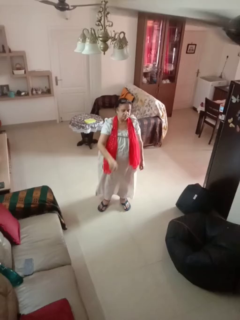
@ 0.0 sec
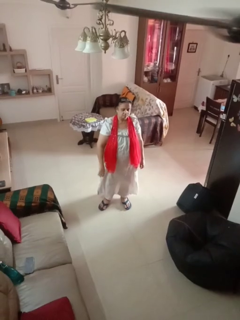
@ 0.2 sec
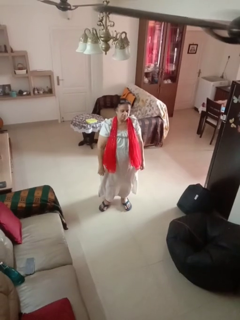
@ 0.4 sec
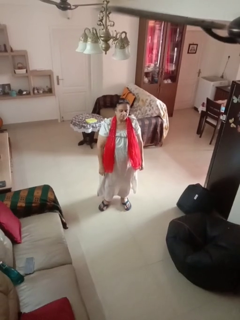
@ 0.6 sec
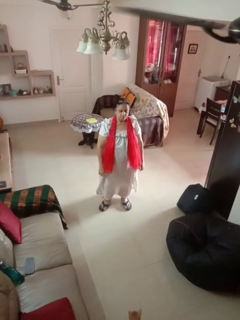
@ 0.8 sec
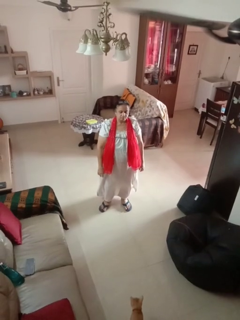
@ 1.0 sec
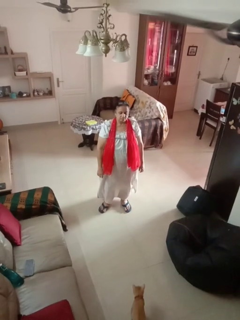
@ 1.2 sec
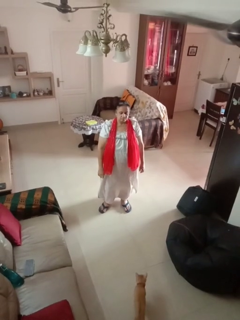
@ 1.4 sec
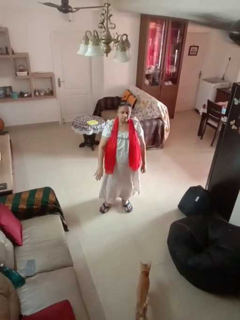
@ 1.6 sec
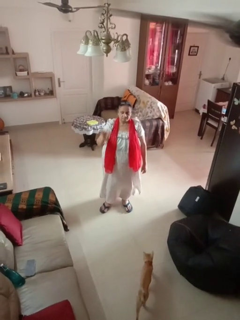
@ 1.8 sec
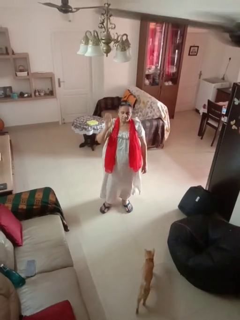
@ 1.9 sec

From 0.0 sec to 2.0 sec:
person gestures lower hand

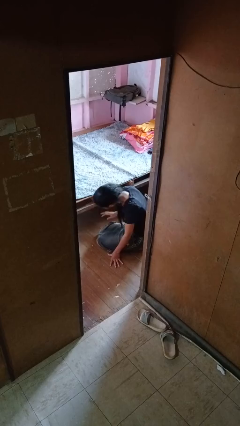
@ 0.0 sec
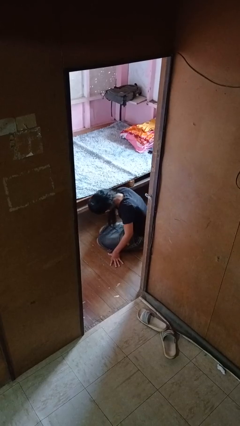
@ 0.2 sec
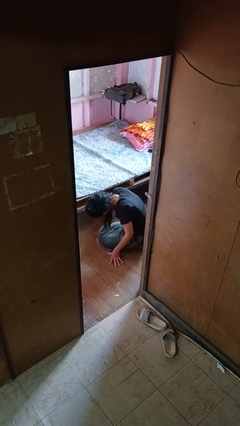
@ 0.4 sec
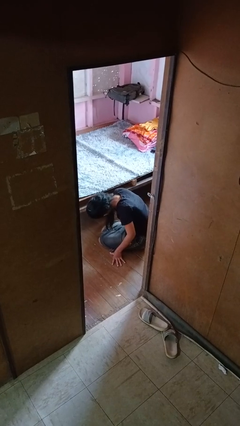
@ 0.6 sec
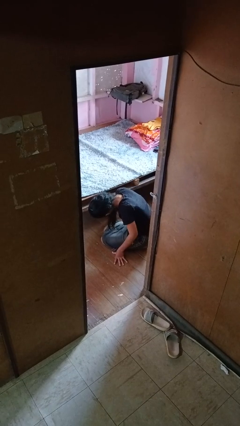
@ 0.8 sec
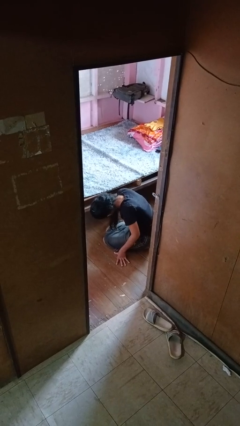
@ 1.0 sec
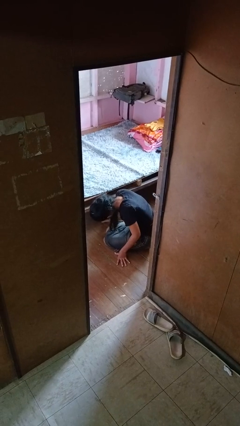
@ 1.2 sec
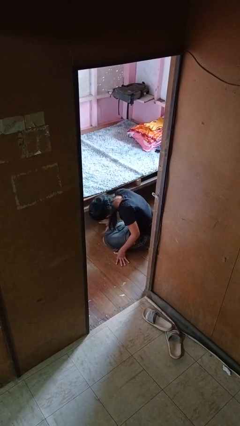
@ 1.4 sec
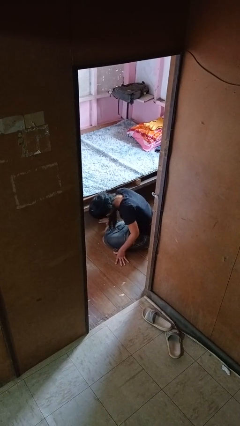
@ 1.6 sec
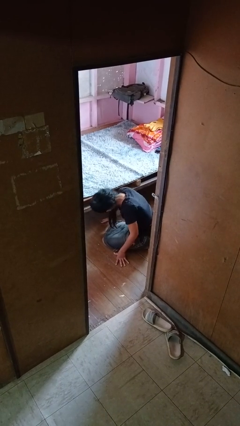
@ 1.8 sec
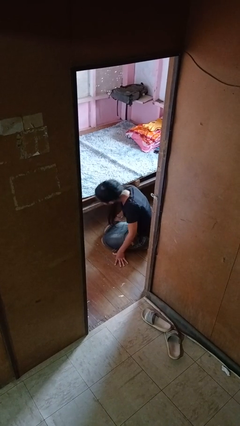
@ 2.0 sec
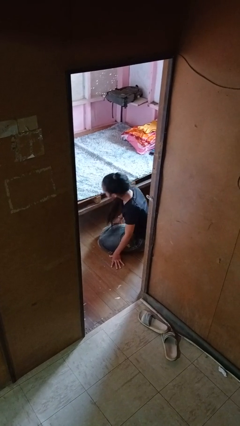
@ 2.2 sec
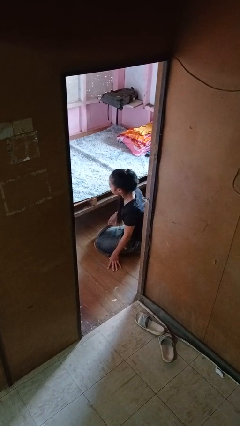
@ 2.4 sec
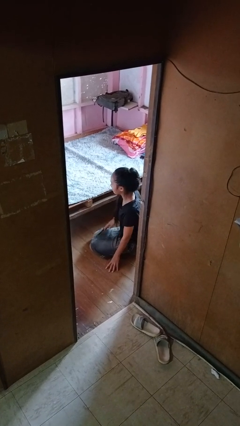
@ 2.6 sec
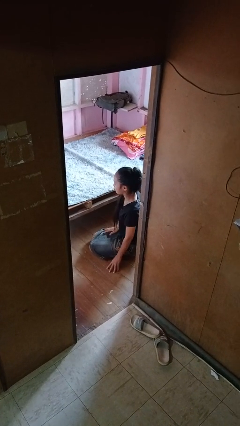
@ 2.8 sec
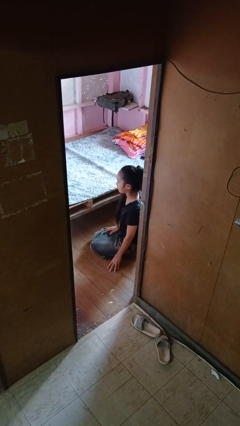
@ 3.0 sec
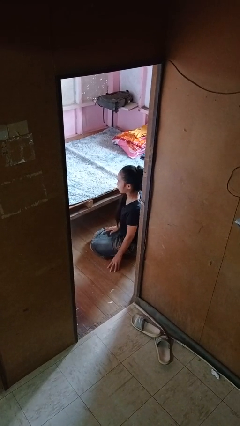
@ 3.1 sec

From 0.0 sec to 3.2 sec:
person searches under bed

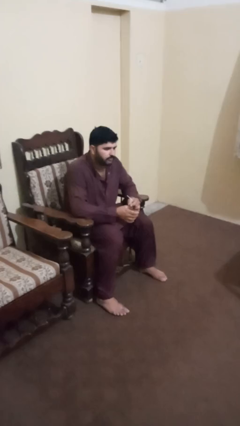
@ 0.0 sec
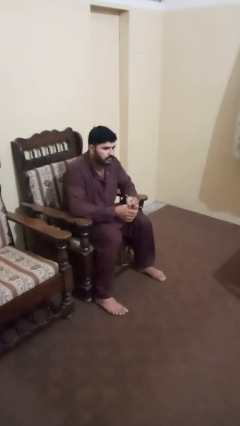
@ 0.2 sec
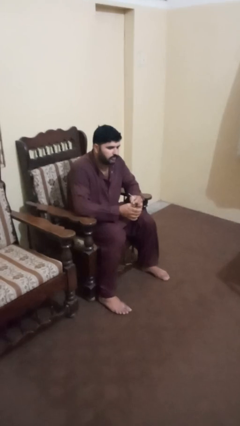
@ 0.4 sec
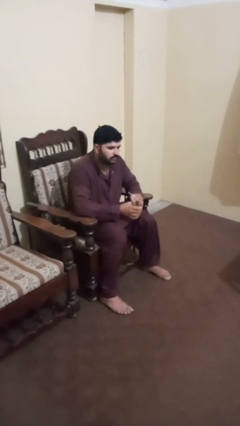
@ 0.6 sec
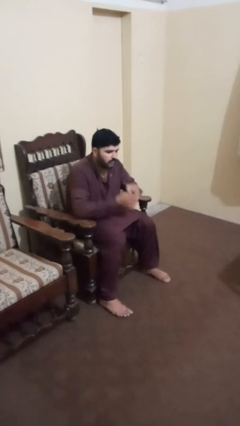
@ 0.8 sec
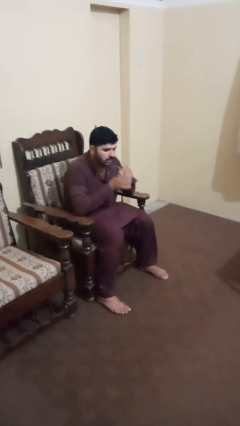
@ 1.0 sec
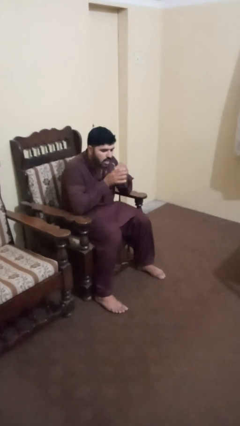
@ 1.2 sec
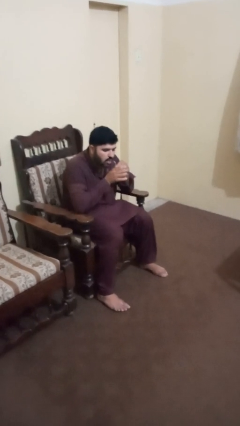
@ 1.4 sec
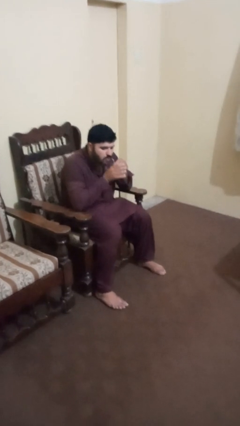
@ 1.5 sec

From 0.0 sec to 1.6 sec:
person drinks from straw

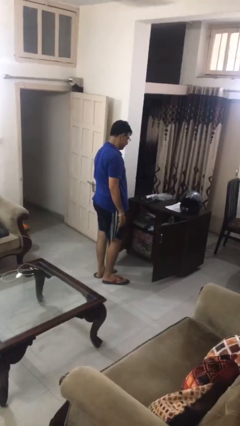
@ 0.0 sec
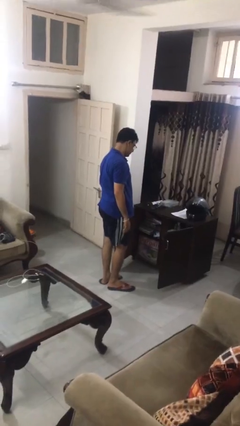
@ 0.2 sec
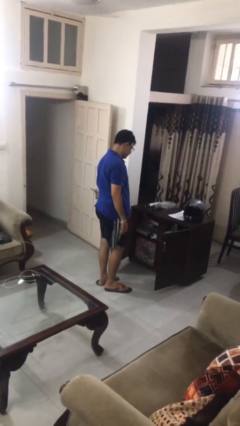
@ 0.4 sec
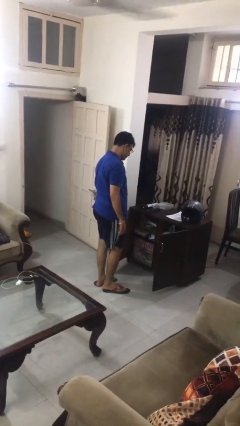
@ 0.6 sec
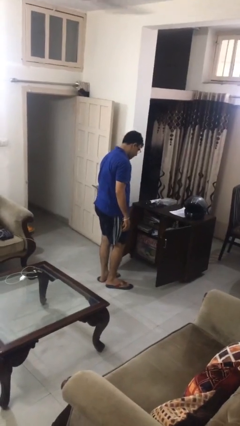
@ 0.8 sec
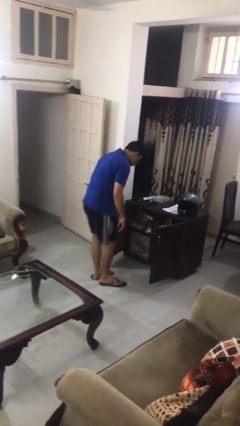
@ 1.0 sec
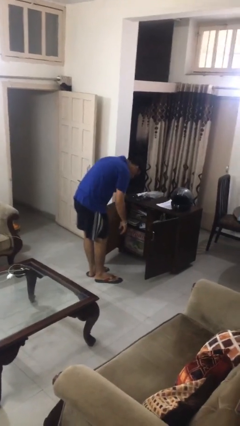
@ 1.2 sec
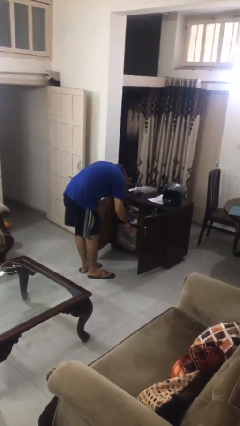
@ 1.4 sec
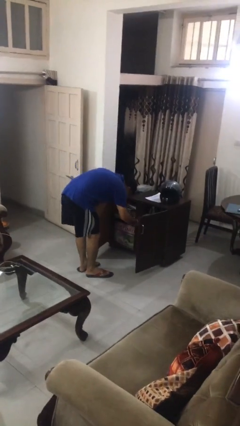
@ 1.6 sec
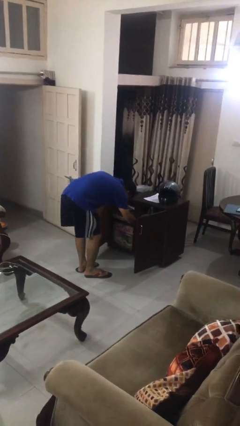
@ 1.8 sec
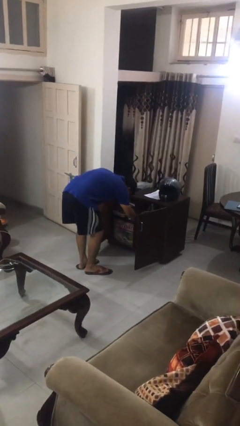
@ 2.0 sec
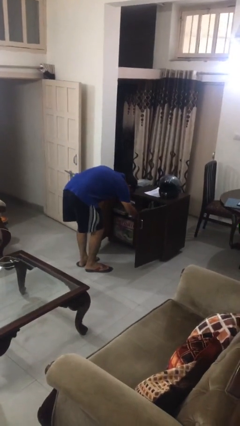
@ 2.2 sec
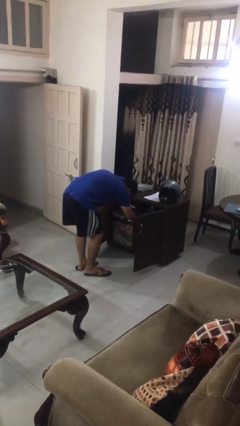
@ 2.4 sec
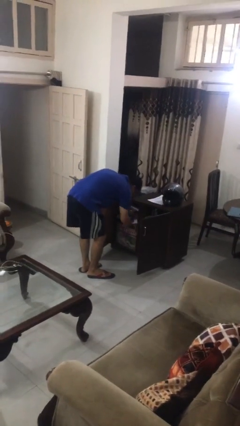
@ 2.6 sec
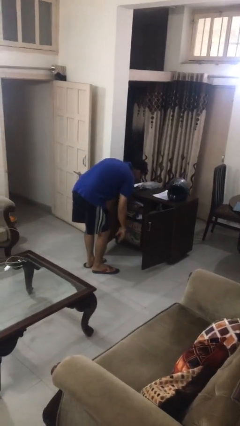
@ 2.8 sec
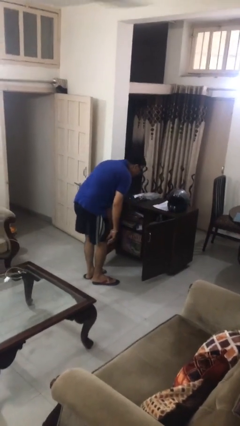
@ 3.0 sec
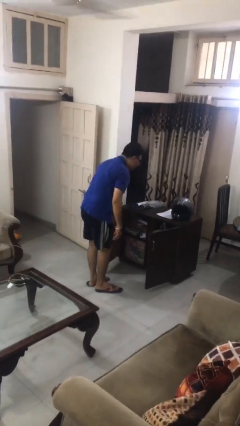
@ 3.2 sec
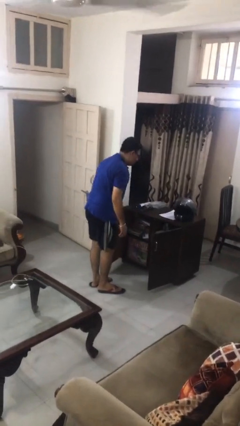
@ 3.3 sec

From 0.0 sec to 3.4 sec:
person searches in cabinet

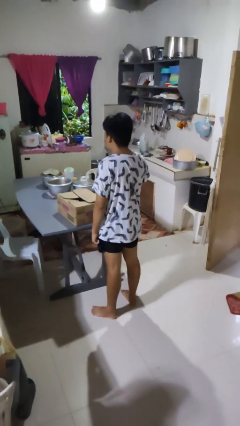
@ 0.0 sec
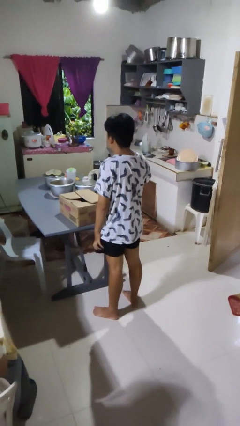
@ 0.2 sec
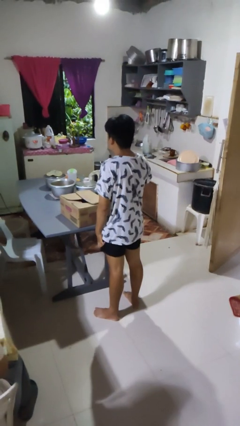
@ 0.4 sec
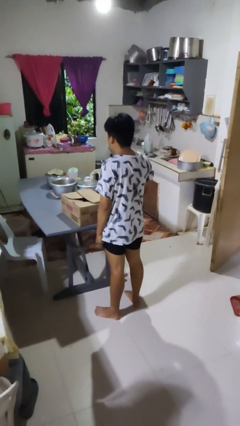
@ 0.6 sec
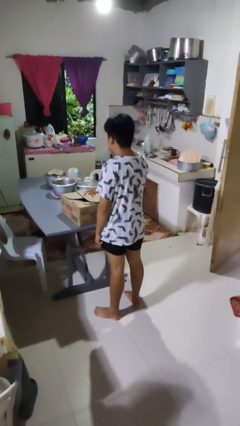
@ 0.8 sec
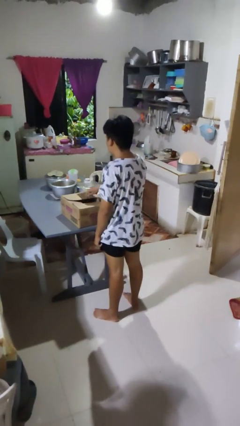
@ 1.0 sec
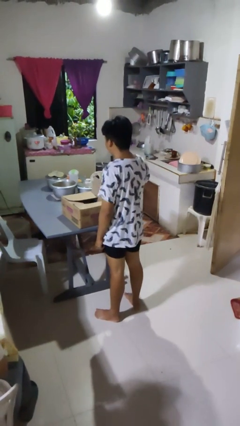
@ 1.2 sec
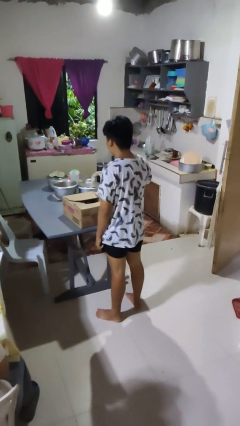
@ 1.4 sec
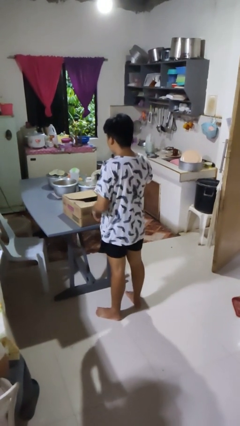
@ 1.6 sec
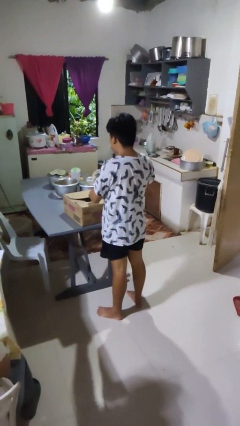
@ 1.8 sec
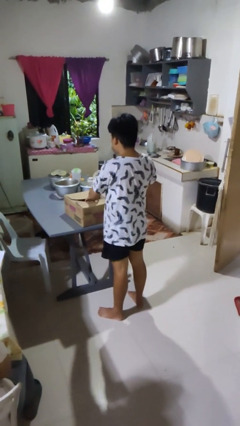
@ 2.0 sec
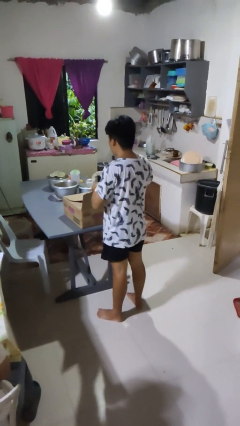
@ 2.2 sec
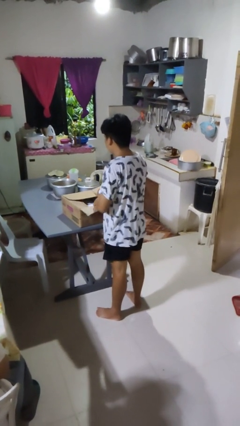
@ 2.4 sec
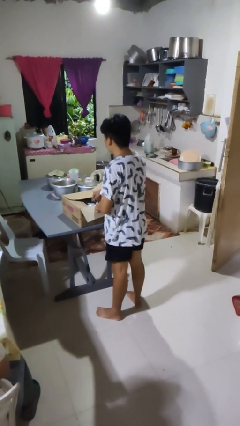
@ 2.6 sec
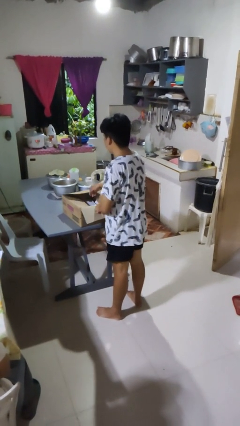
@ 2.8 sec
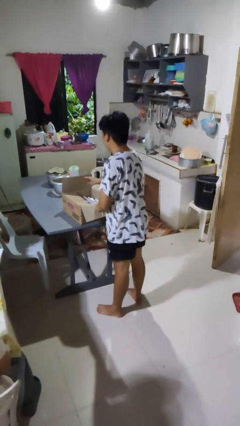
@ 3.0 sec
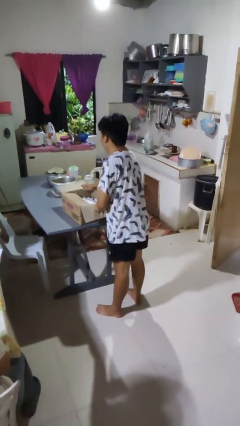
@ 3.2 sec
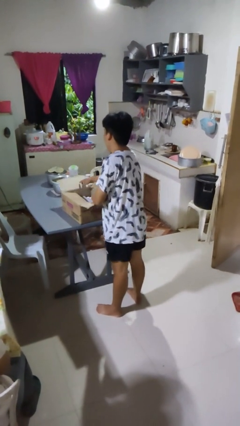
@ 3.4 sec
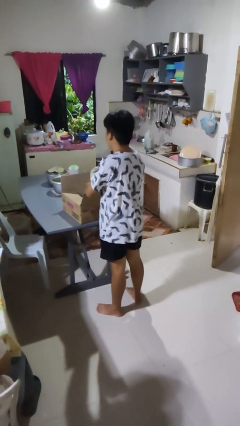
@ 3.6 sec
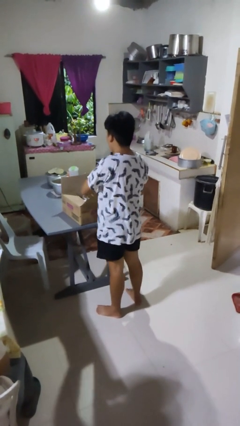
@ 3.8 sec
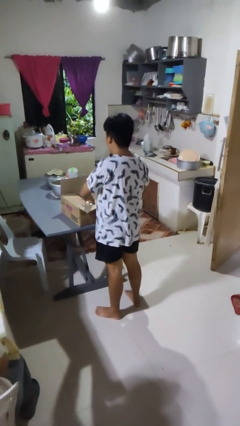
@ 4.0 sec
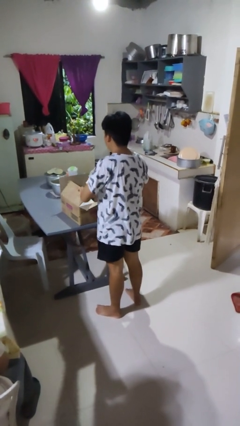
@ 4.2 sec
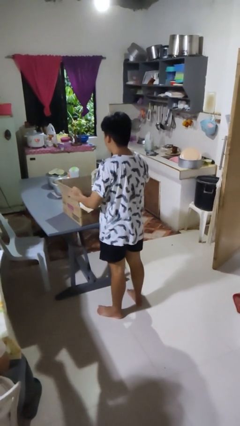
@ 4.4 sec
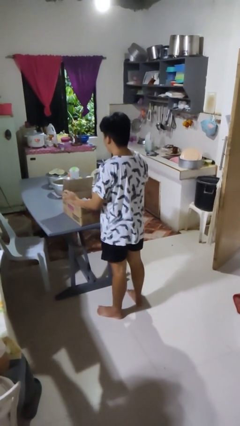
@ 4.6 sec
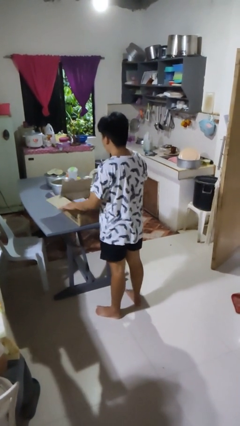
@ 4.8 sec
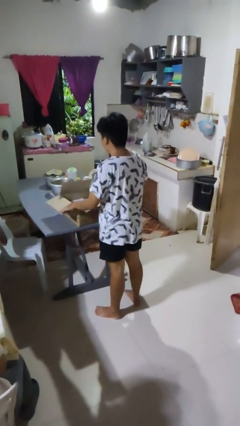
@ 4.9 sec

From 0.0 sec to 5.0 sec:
person opens box

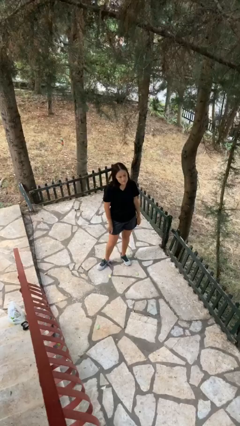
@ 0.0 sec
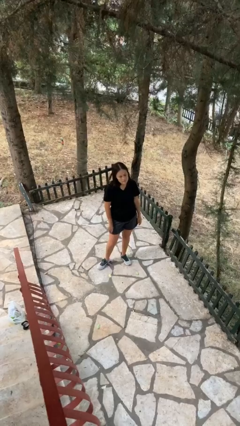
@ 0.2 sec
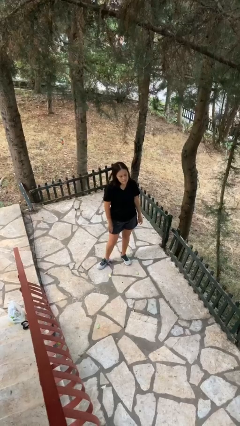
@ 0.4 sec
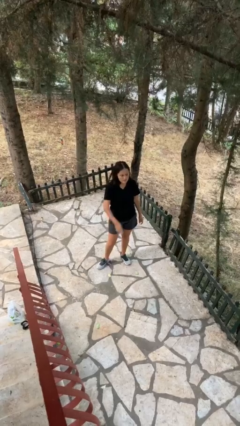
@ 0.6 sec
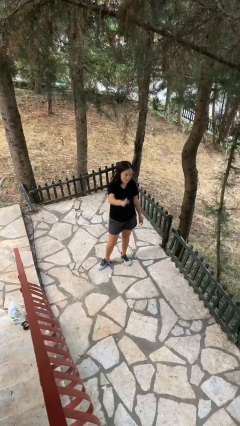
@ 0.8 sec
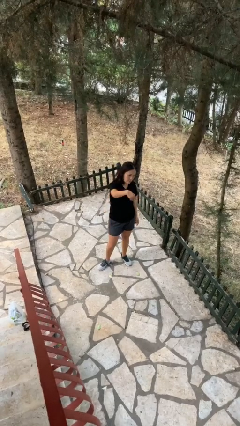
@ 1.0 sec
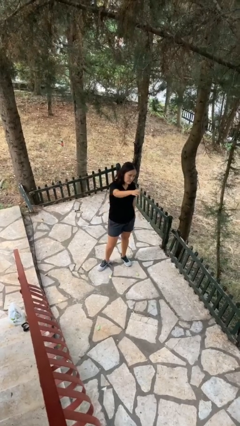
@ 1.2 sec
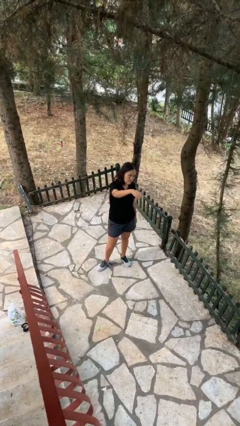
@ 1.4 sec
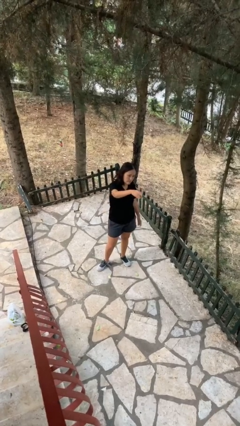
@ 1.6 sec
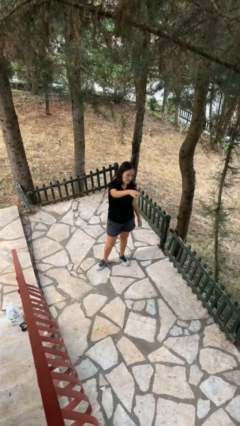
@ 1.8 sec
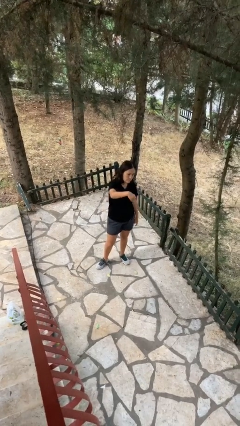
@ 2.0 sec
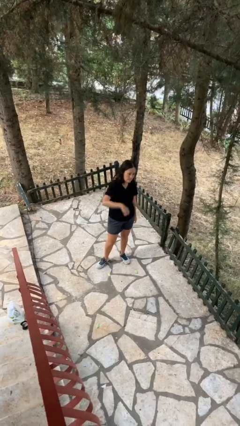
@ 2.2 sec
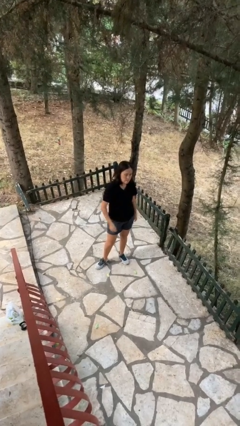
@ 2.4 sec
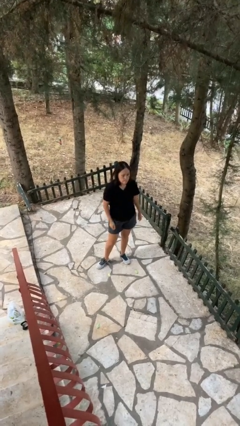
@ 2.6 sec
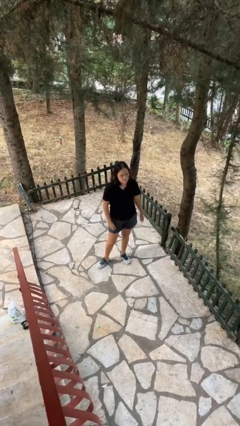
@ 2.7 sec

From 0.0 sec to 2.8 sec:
person gestures come here
